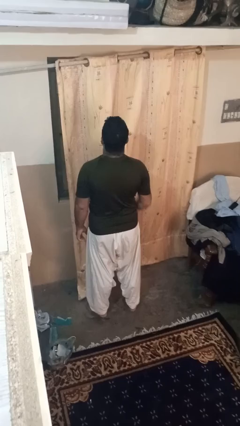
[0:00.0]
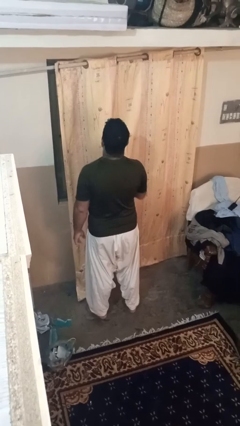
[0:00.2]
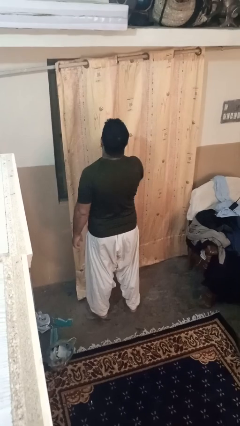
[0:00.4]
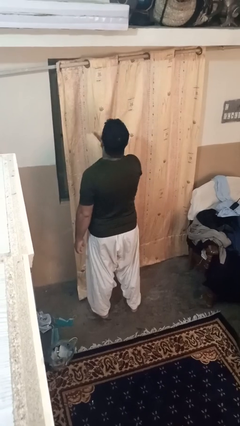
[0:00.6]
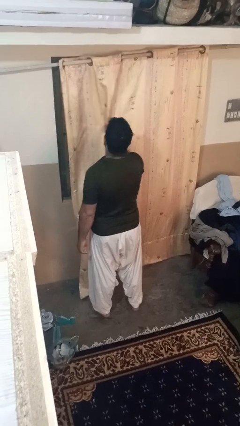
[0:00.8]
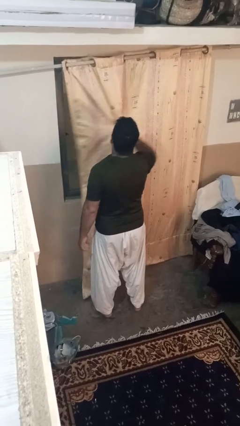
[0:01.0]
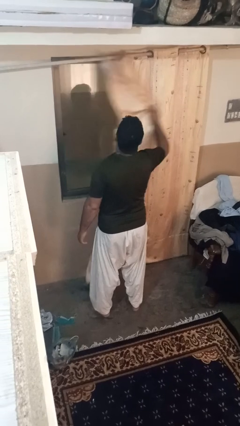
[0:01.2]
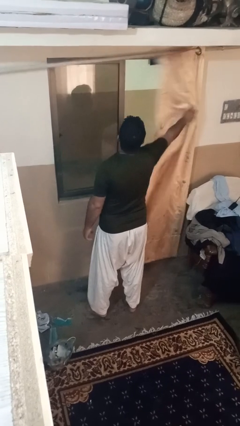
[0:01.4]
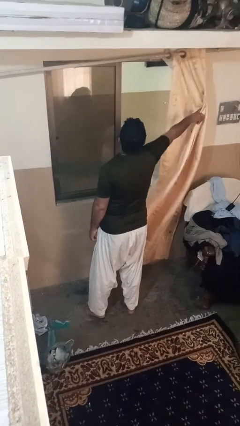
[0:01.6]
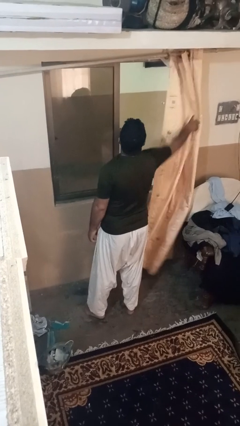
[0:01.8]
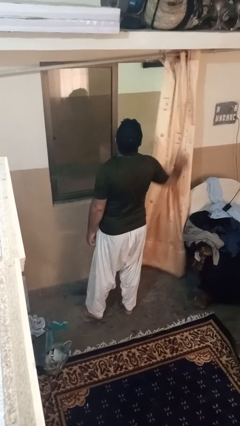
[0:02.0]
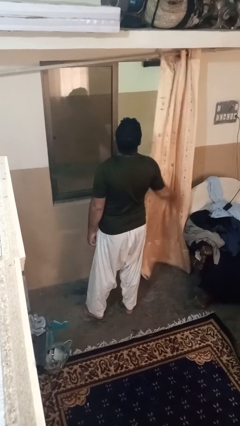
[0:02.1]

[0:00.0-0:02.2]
person opens curtains

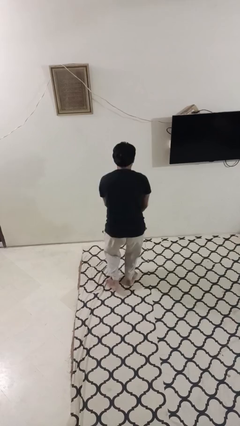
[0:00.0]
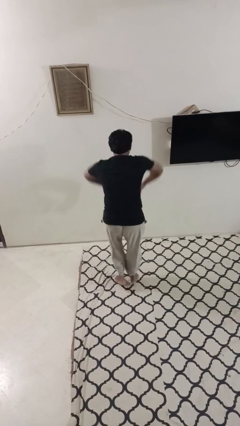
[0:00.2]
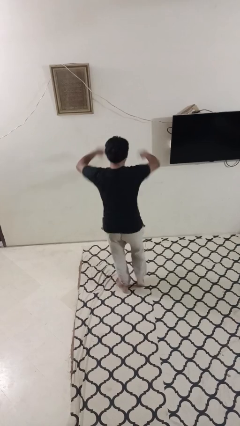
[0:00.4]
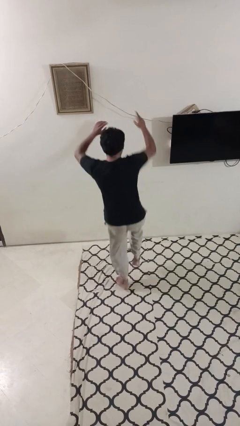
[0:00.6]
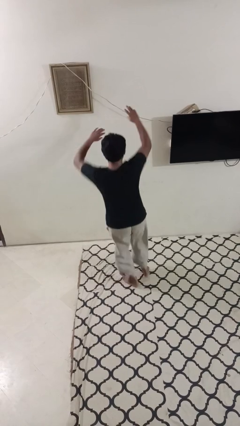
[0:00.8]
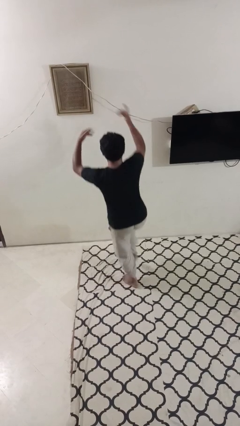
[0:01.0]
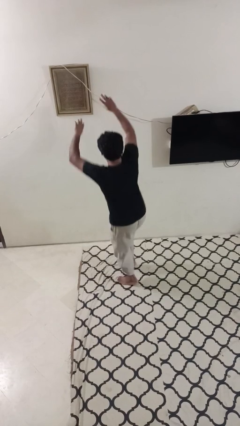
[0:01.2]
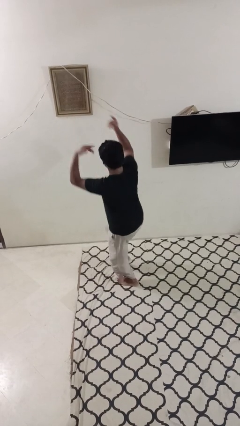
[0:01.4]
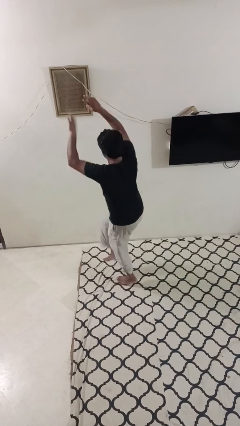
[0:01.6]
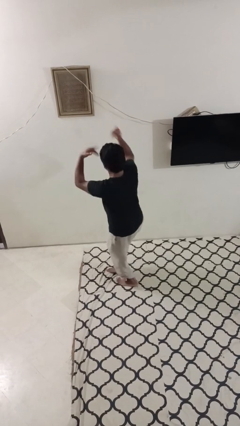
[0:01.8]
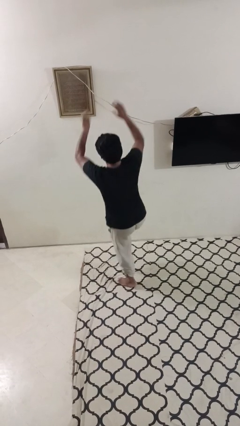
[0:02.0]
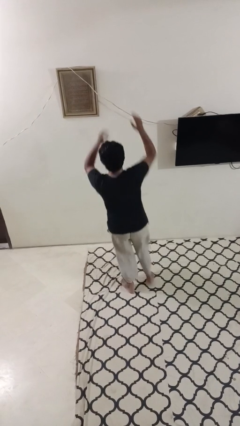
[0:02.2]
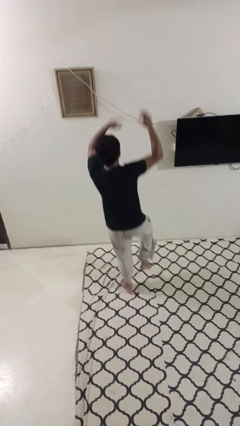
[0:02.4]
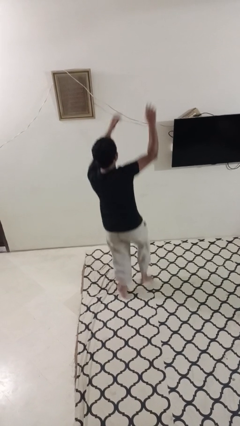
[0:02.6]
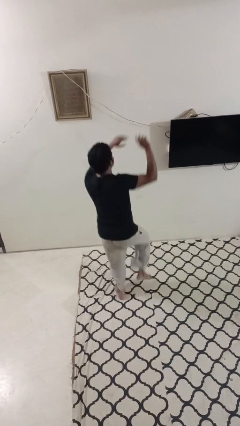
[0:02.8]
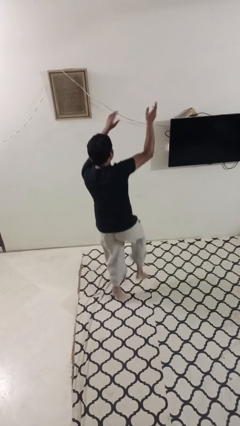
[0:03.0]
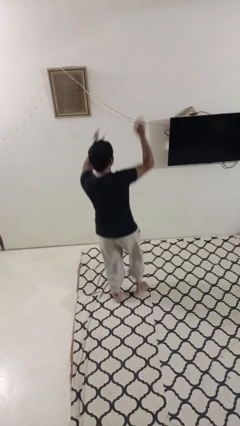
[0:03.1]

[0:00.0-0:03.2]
person dances in place

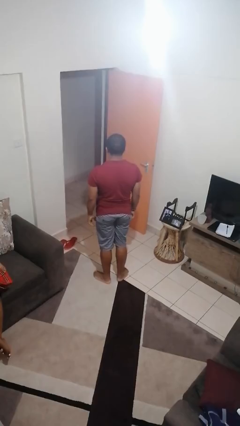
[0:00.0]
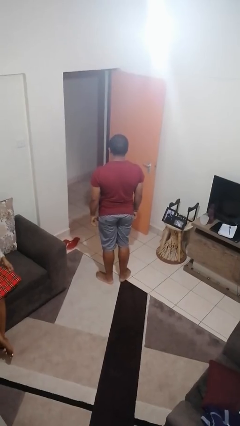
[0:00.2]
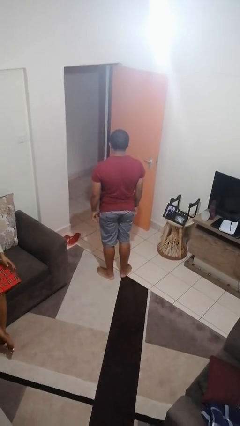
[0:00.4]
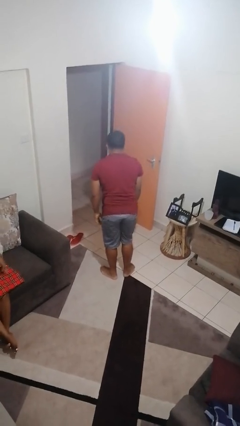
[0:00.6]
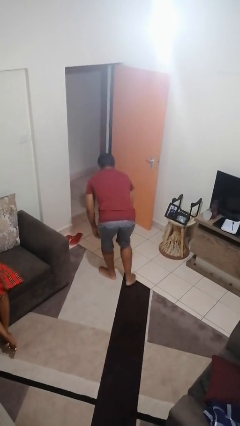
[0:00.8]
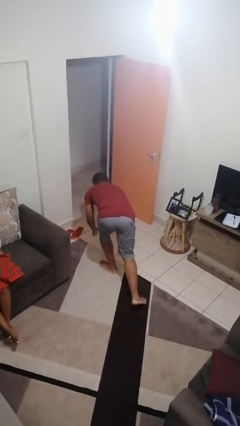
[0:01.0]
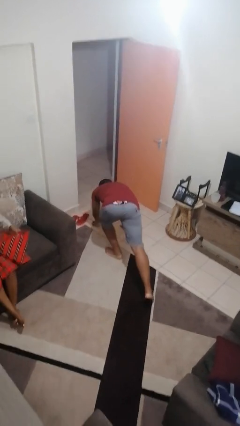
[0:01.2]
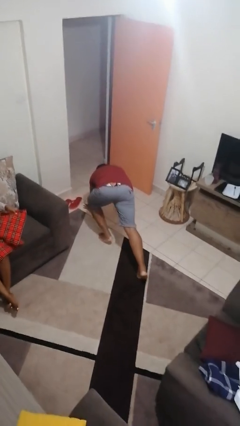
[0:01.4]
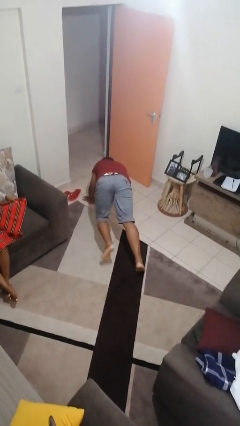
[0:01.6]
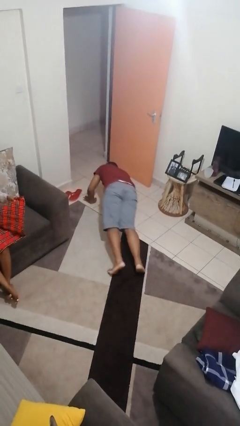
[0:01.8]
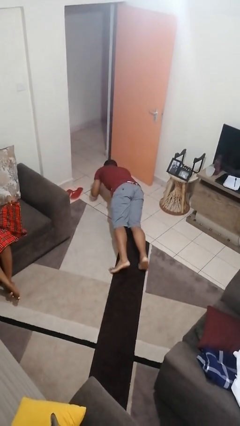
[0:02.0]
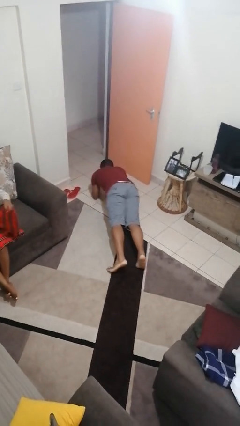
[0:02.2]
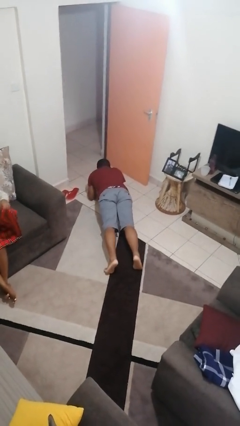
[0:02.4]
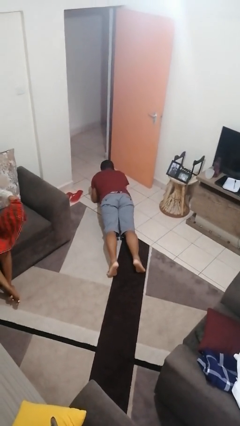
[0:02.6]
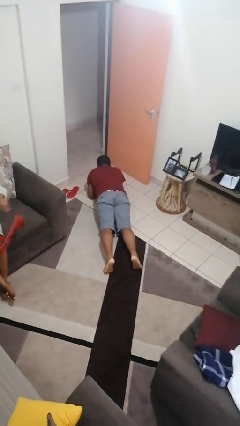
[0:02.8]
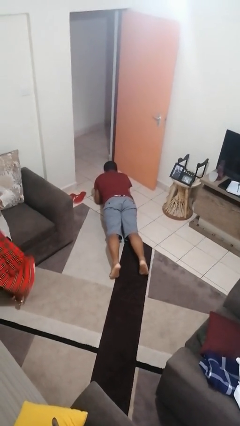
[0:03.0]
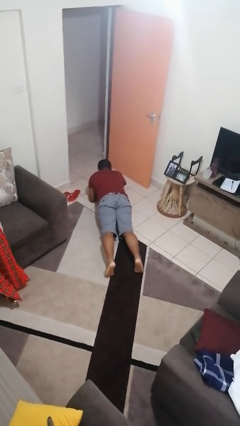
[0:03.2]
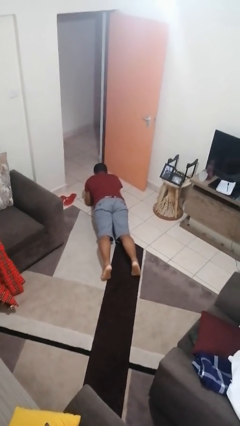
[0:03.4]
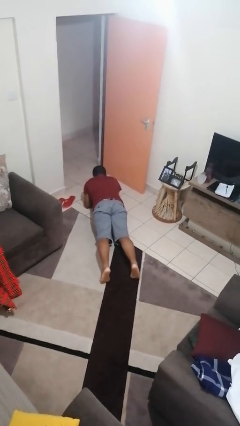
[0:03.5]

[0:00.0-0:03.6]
person exercises with plank

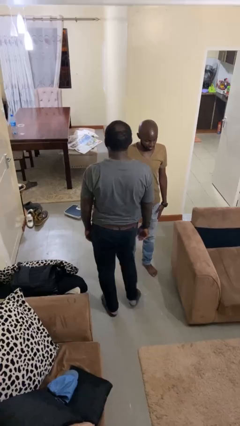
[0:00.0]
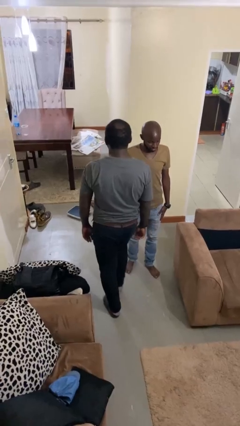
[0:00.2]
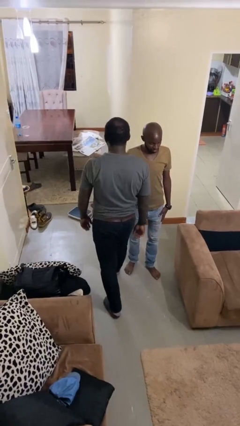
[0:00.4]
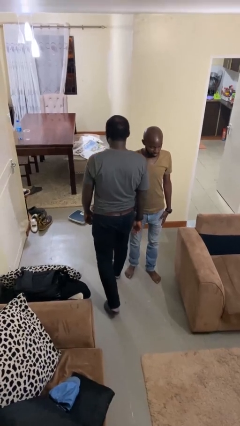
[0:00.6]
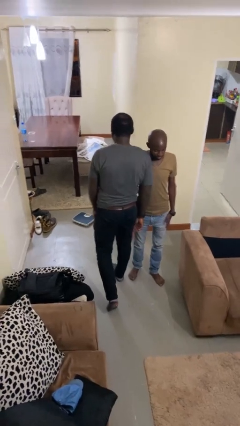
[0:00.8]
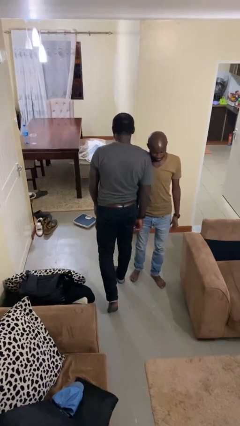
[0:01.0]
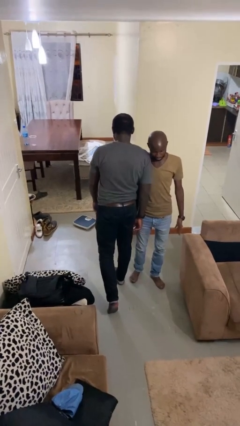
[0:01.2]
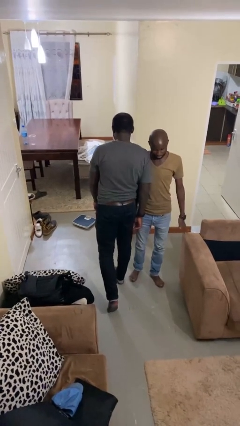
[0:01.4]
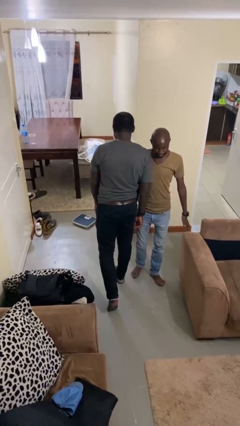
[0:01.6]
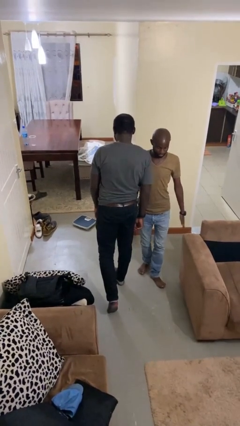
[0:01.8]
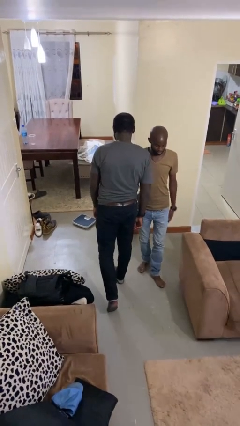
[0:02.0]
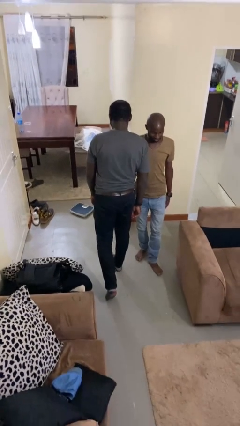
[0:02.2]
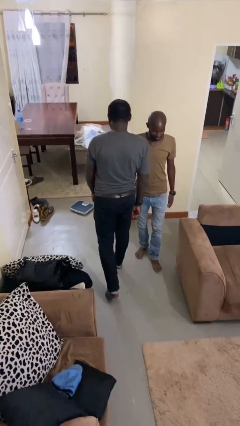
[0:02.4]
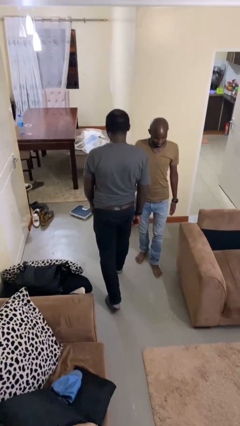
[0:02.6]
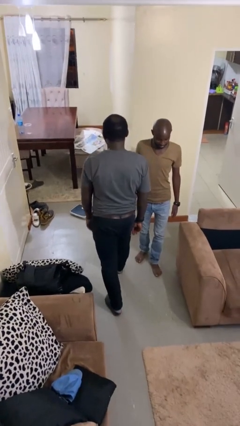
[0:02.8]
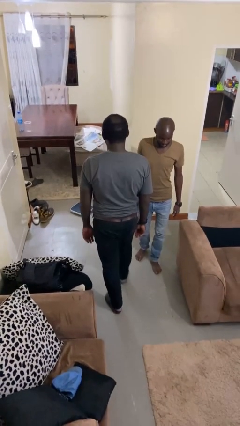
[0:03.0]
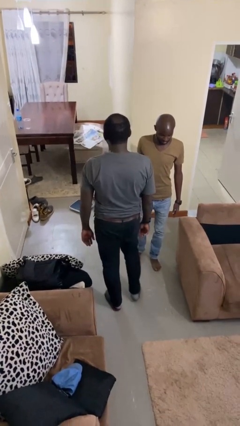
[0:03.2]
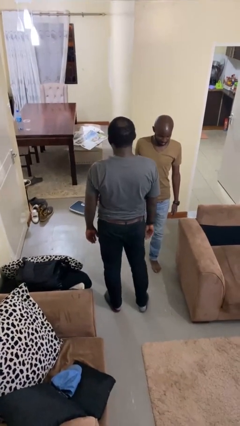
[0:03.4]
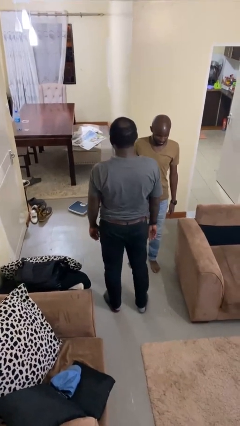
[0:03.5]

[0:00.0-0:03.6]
person bumps into person

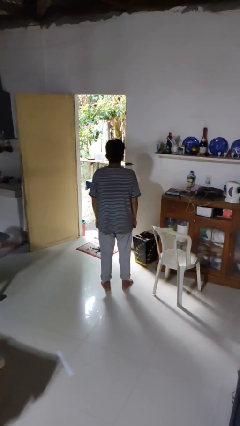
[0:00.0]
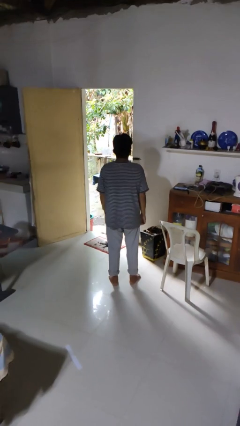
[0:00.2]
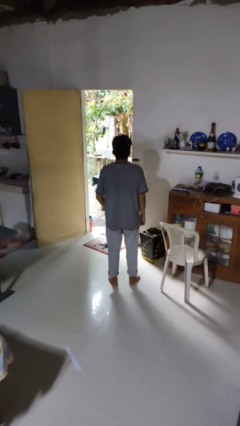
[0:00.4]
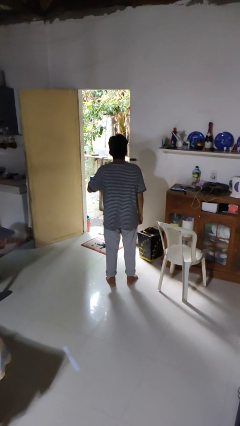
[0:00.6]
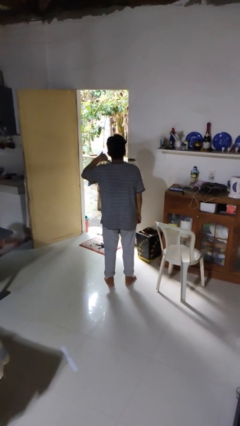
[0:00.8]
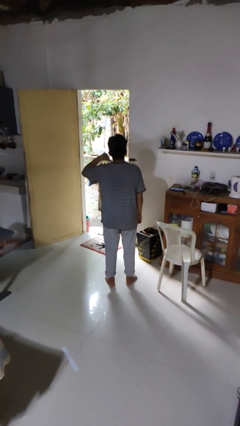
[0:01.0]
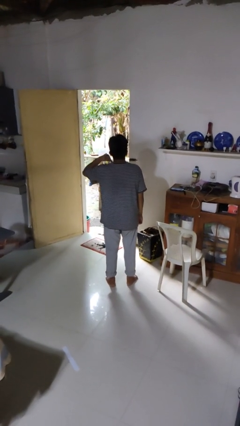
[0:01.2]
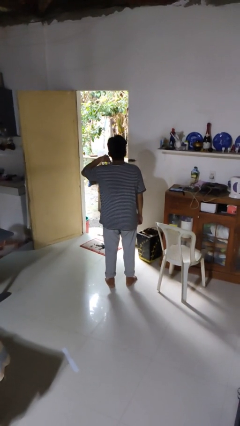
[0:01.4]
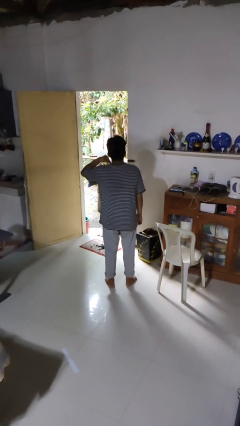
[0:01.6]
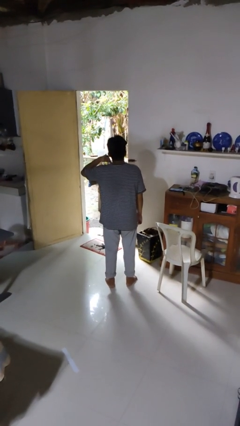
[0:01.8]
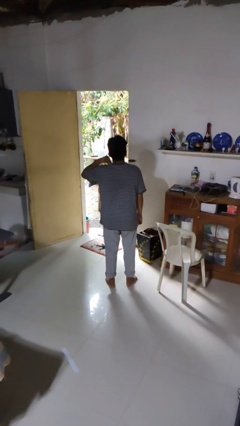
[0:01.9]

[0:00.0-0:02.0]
person gestures call me

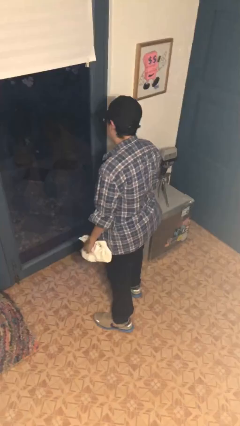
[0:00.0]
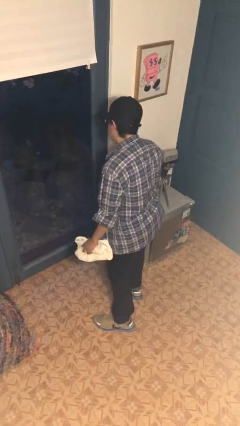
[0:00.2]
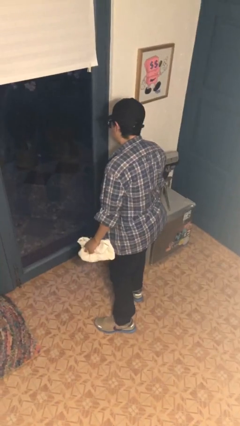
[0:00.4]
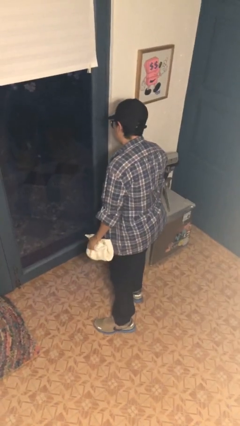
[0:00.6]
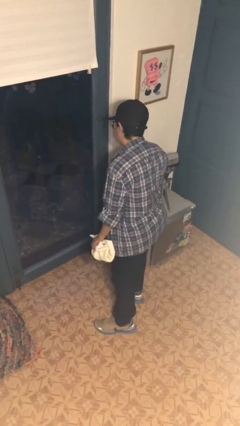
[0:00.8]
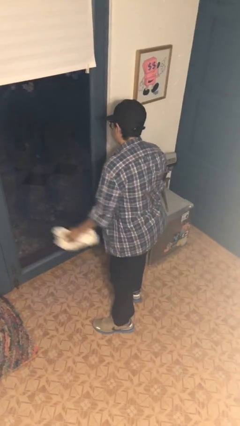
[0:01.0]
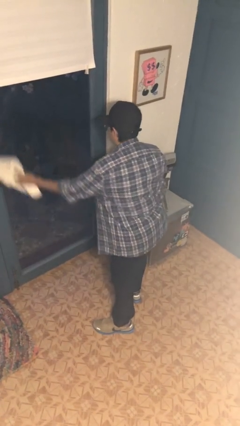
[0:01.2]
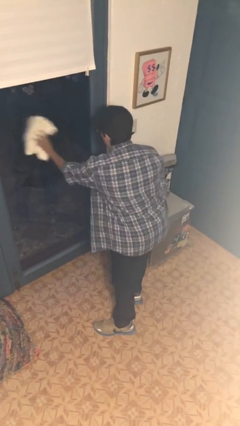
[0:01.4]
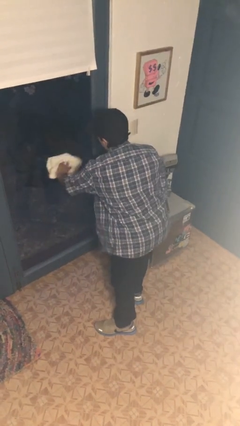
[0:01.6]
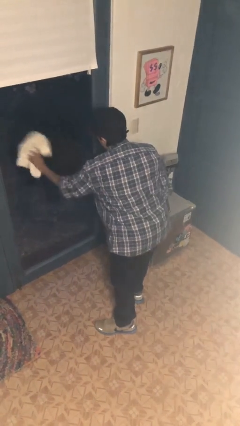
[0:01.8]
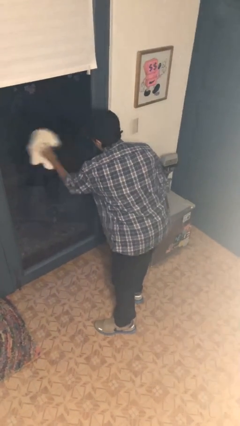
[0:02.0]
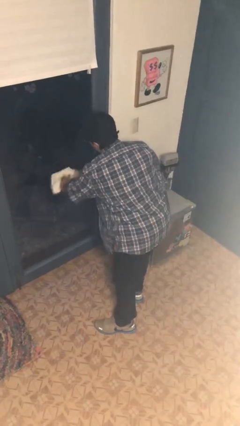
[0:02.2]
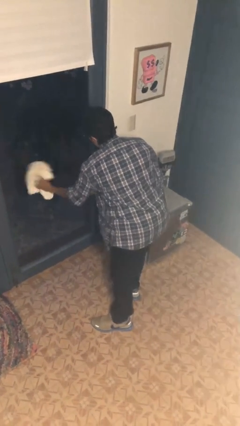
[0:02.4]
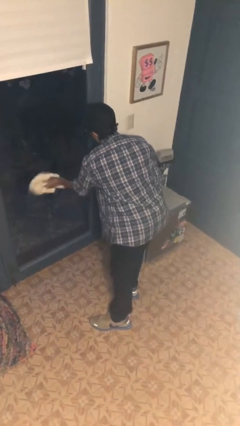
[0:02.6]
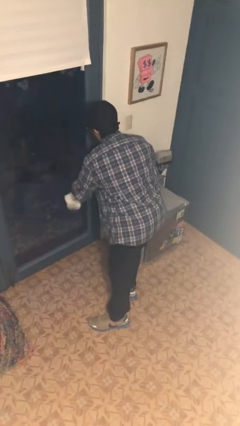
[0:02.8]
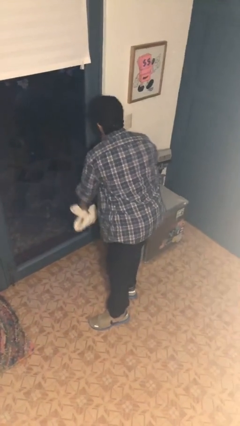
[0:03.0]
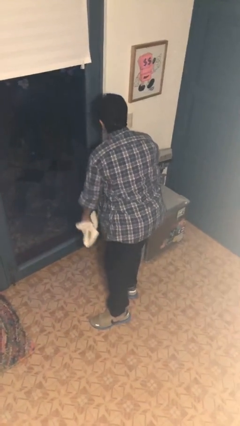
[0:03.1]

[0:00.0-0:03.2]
person washes window
